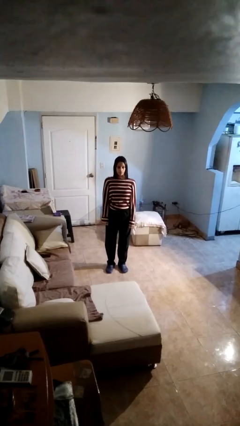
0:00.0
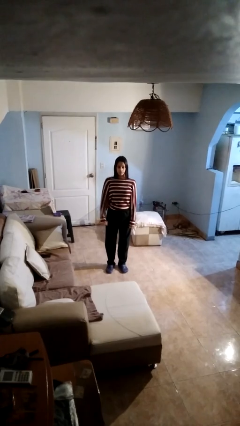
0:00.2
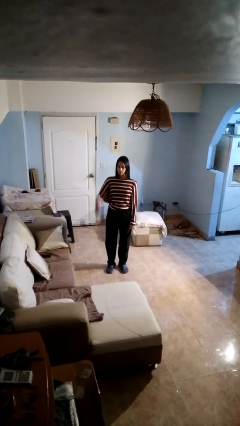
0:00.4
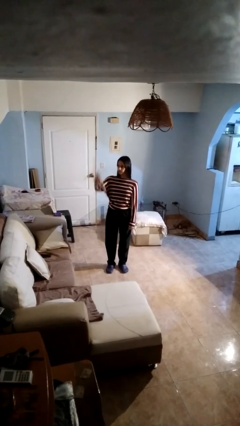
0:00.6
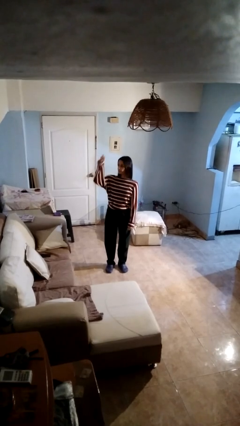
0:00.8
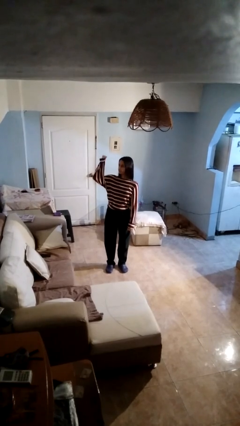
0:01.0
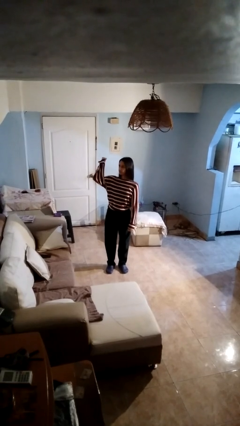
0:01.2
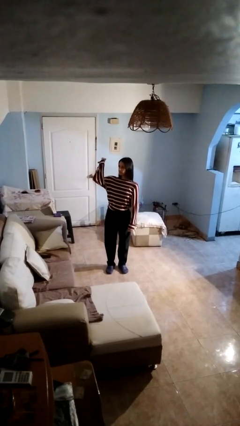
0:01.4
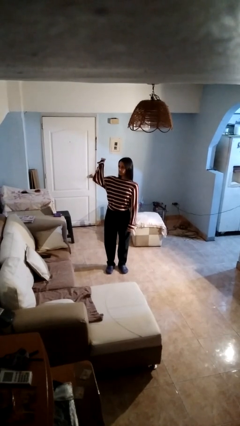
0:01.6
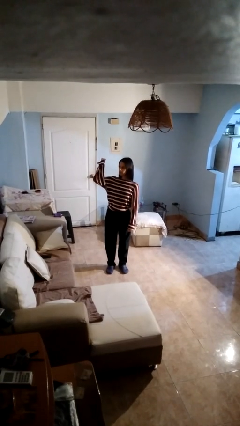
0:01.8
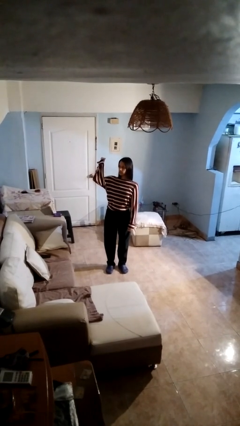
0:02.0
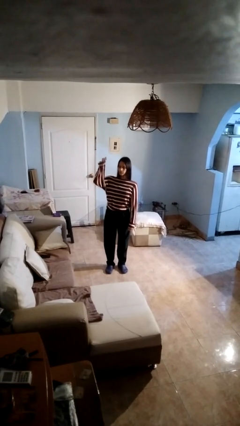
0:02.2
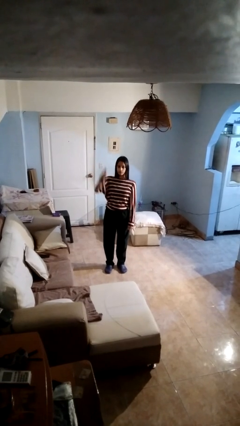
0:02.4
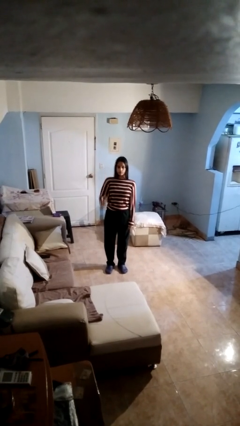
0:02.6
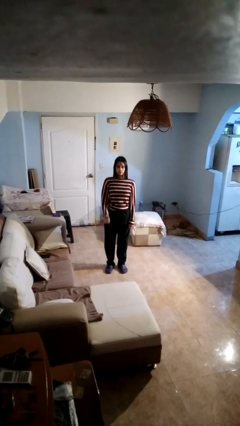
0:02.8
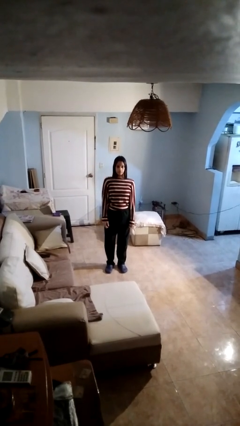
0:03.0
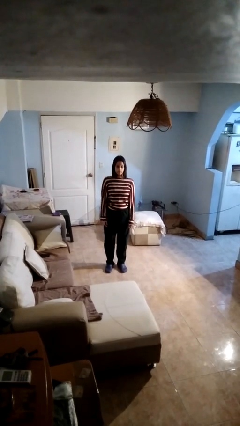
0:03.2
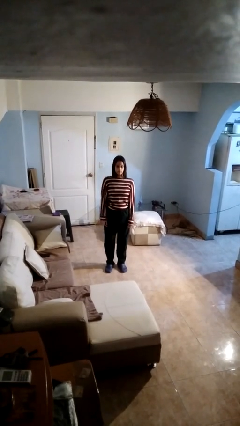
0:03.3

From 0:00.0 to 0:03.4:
person gestures behind me

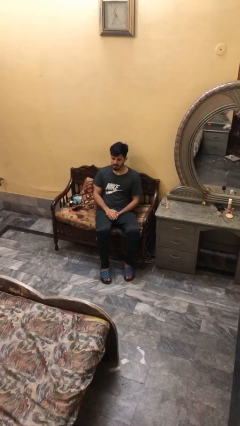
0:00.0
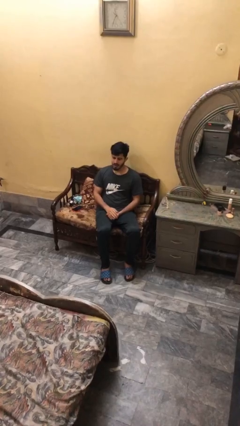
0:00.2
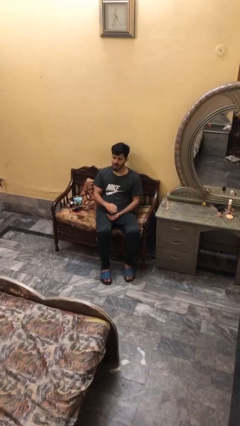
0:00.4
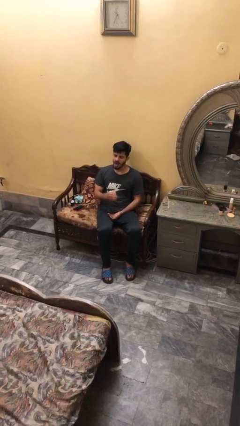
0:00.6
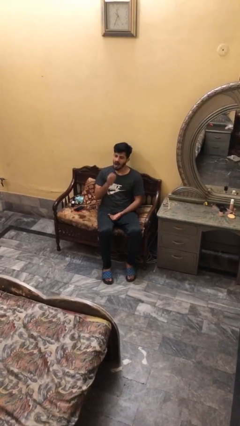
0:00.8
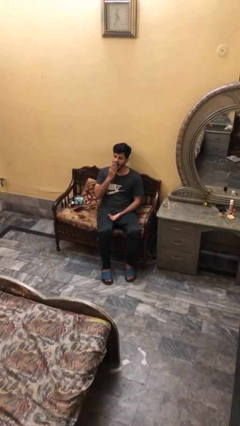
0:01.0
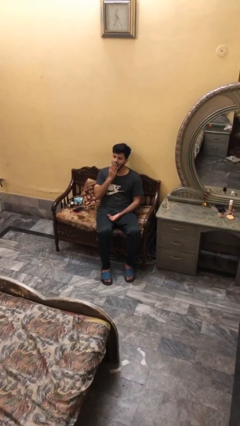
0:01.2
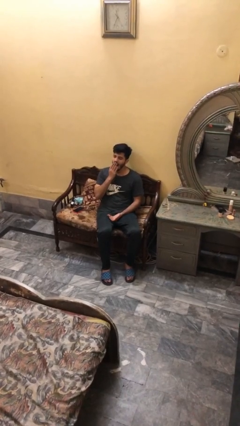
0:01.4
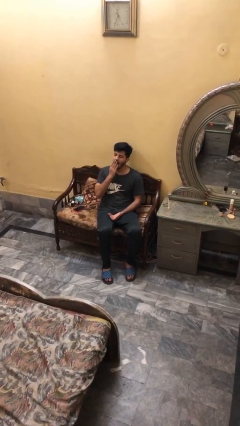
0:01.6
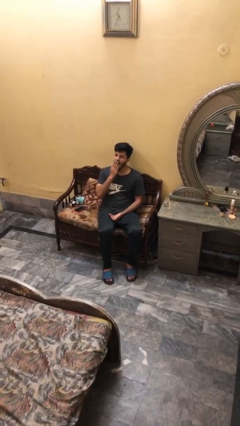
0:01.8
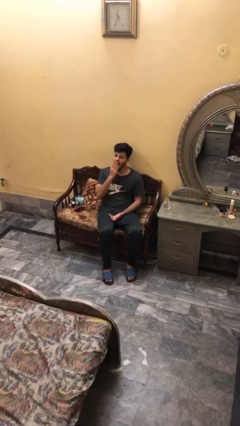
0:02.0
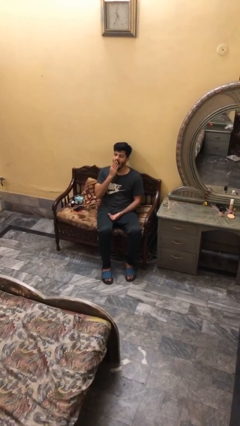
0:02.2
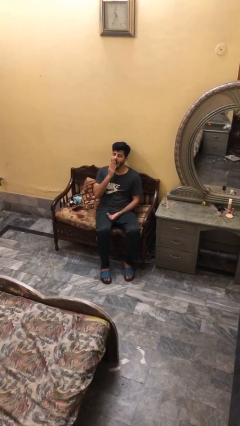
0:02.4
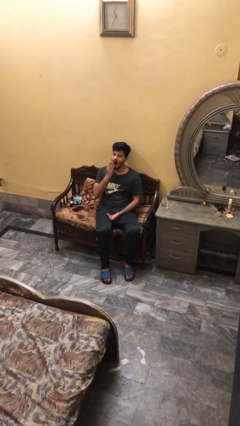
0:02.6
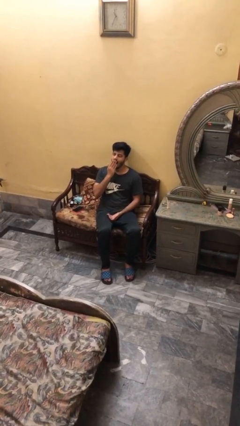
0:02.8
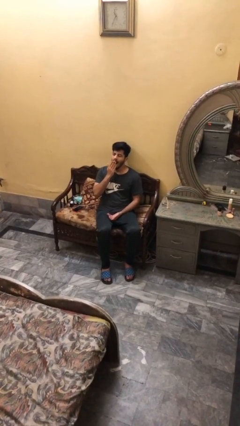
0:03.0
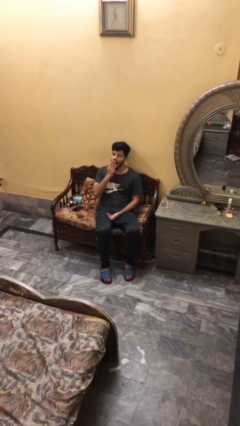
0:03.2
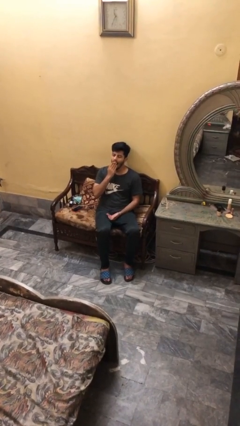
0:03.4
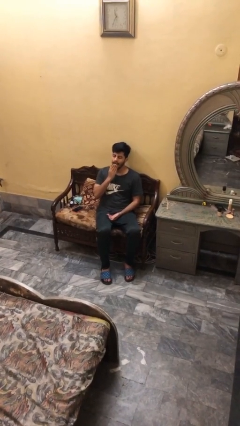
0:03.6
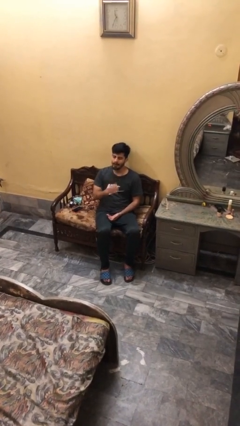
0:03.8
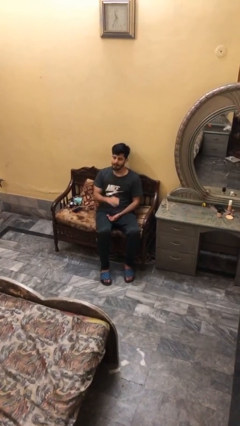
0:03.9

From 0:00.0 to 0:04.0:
person yawns

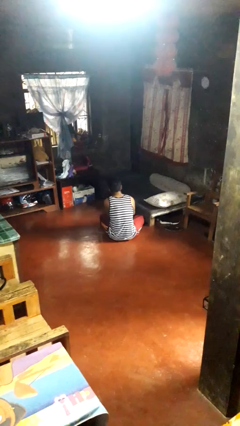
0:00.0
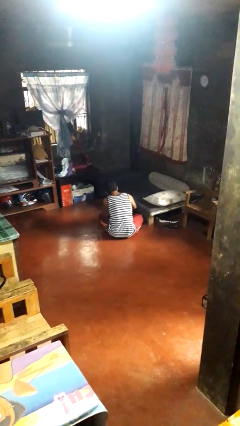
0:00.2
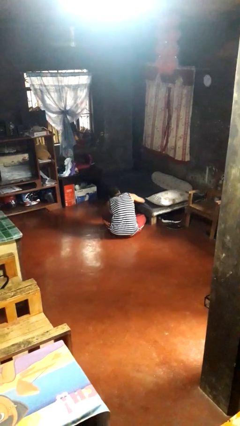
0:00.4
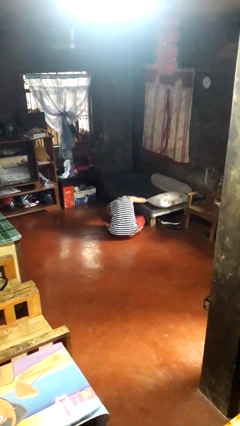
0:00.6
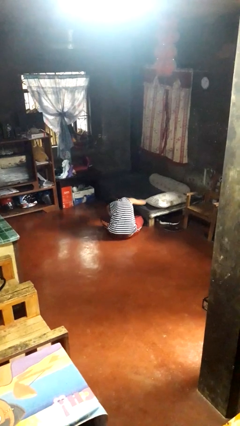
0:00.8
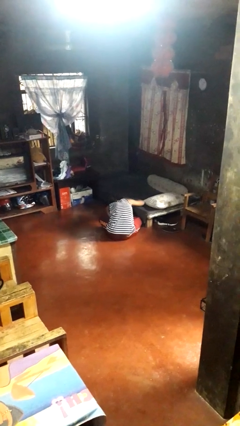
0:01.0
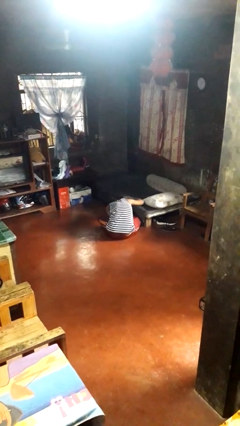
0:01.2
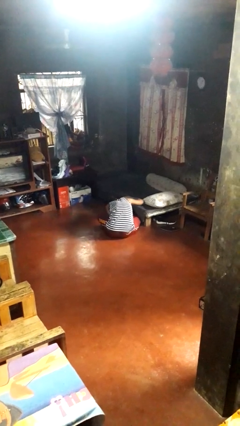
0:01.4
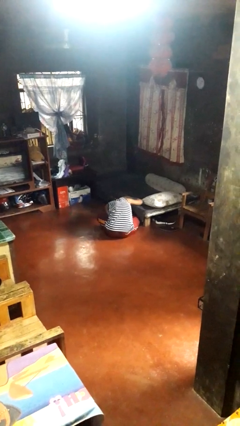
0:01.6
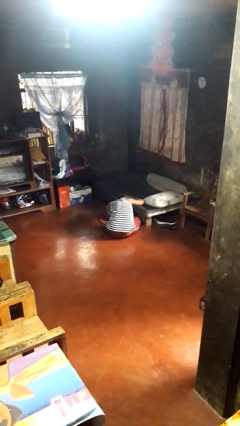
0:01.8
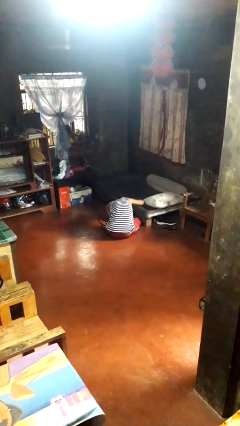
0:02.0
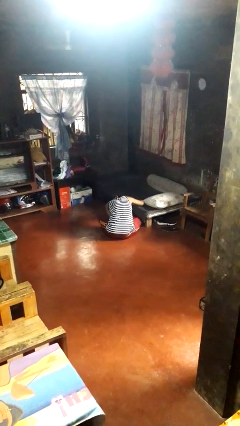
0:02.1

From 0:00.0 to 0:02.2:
person searches under bed

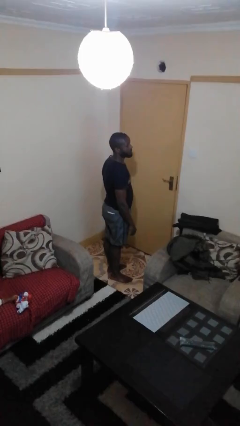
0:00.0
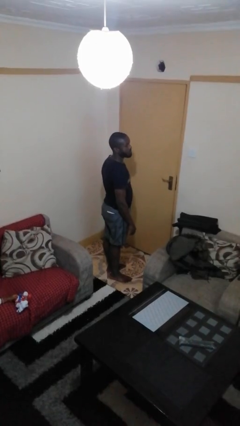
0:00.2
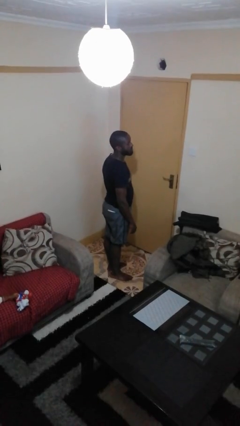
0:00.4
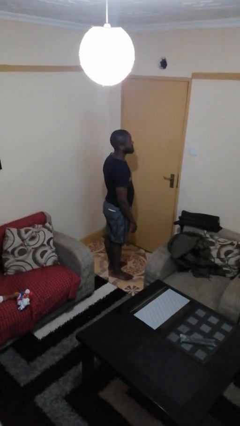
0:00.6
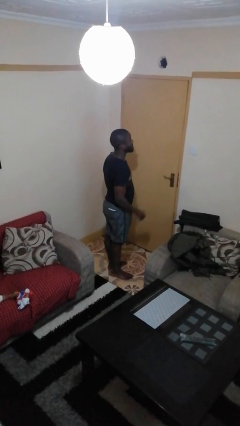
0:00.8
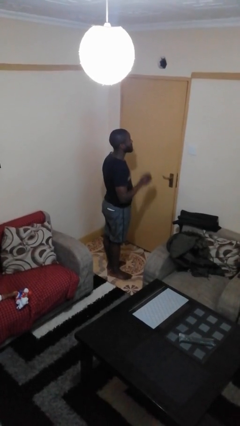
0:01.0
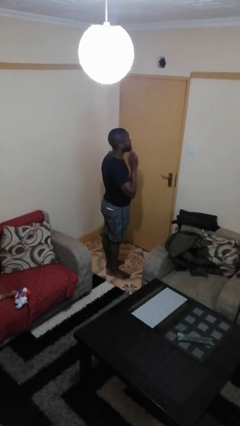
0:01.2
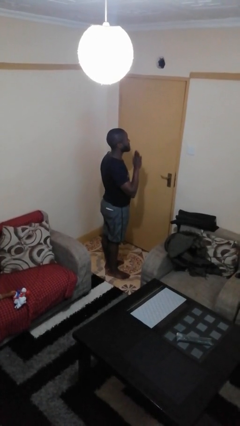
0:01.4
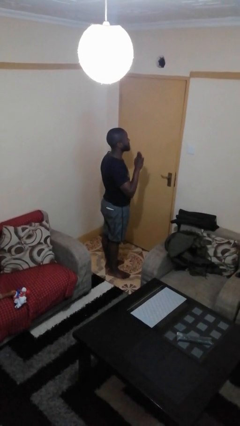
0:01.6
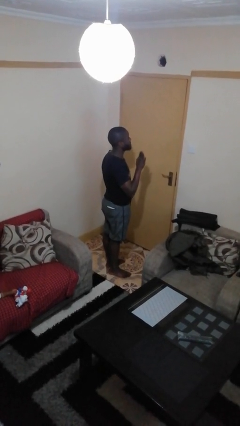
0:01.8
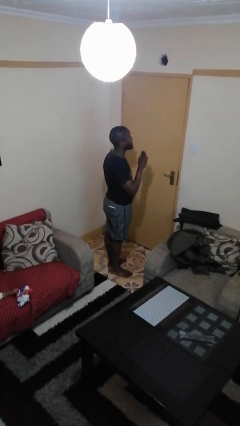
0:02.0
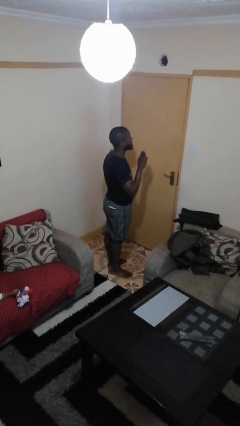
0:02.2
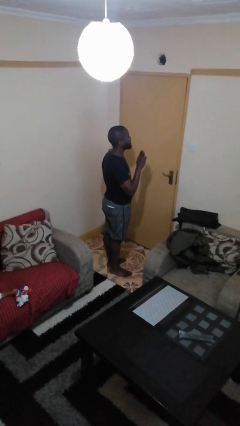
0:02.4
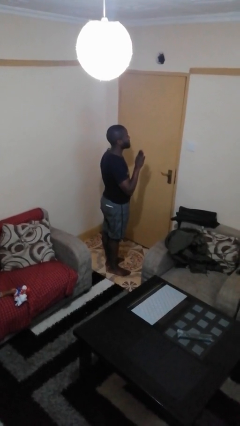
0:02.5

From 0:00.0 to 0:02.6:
person gestures stop

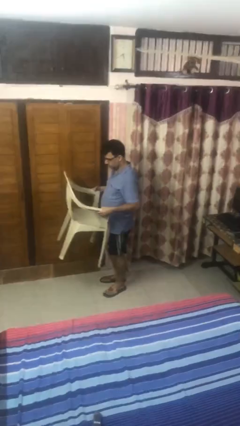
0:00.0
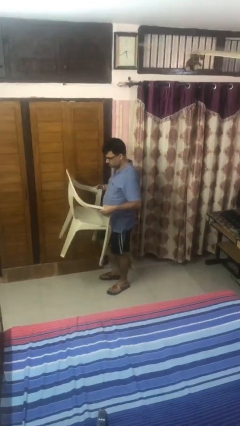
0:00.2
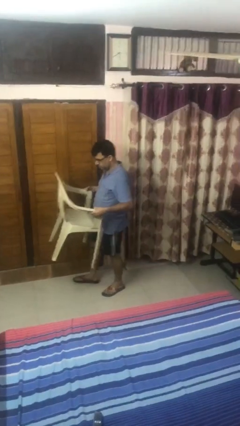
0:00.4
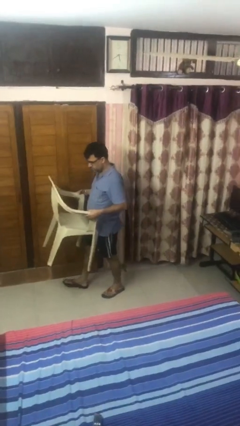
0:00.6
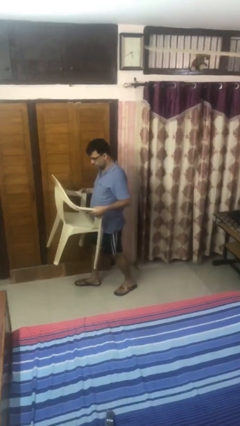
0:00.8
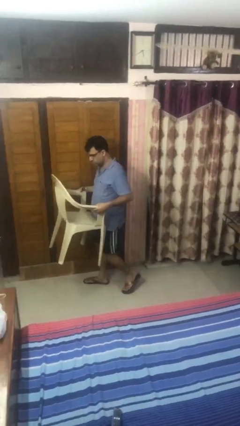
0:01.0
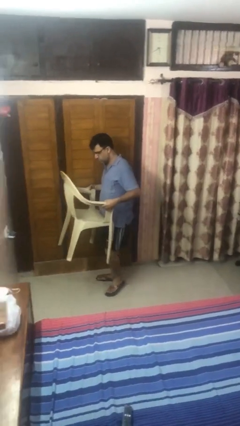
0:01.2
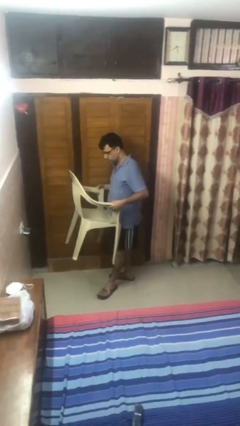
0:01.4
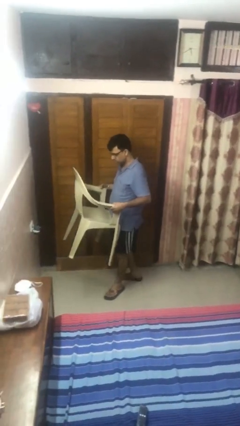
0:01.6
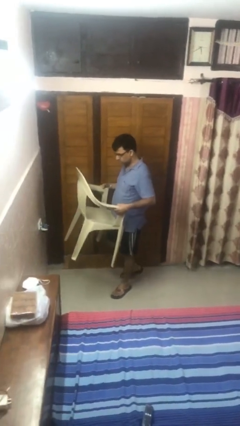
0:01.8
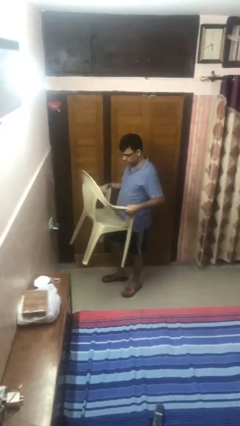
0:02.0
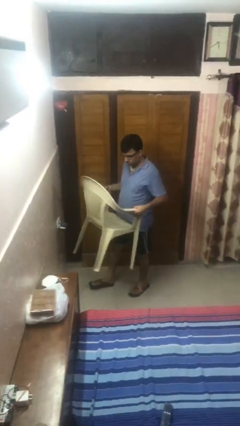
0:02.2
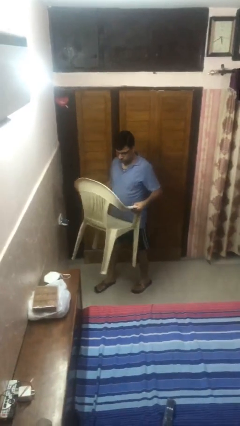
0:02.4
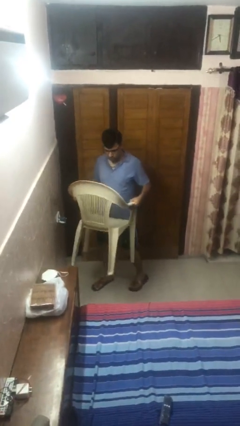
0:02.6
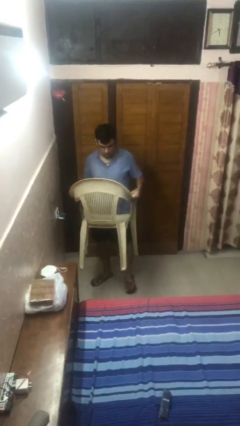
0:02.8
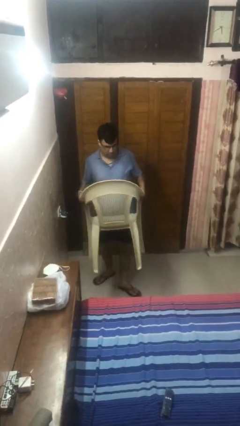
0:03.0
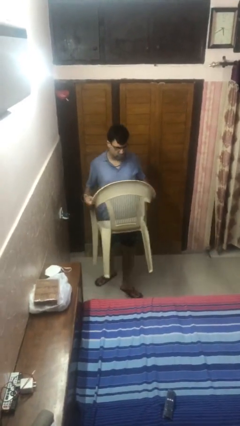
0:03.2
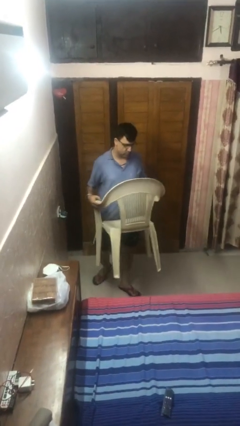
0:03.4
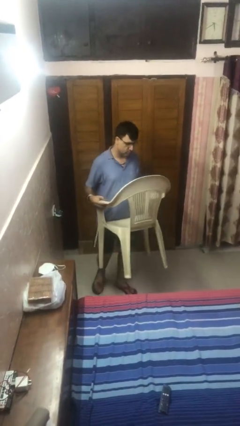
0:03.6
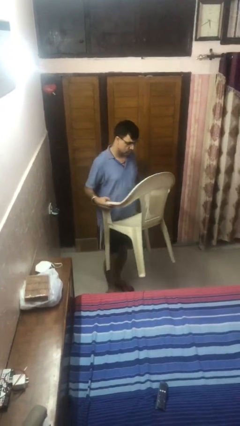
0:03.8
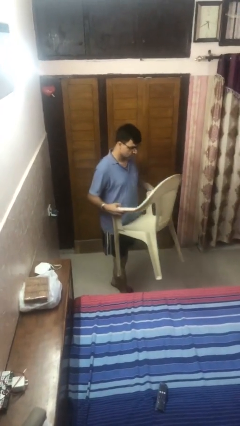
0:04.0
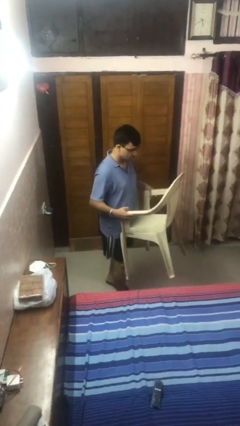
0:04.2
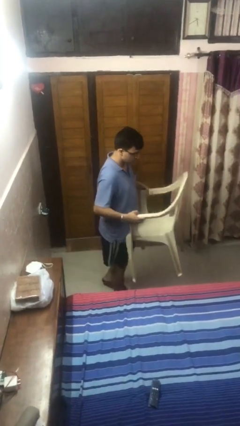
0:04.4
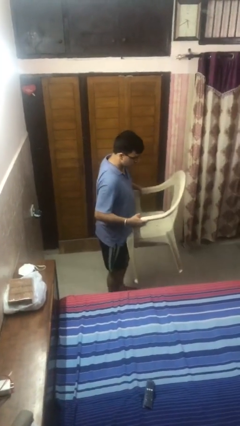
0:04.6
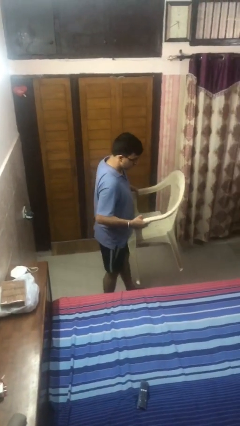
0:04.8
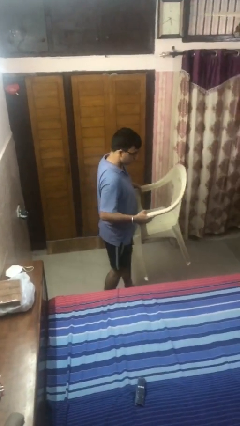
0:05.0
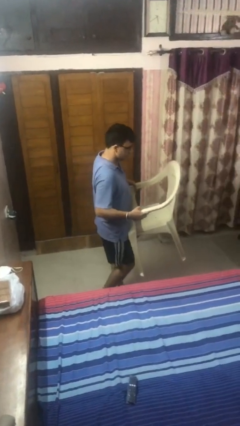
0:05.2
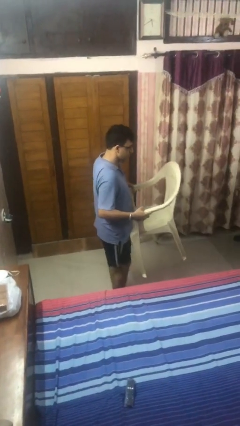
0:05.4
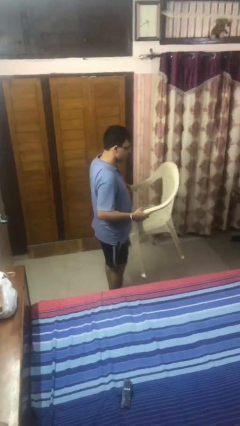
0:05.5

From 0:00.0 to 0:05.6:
person carries furniture
